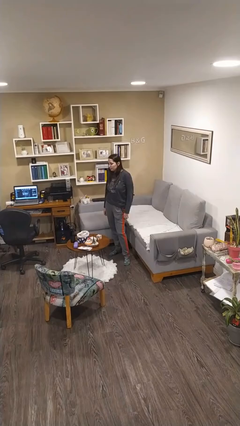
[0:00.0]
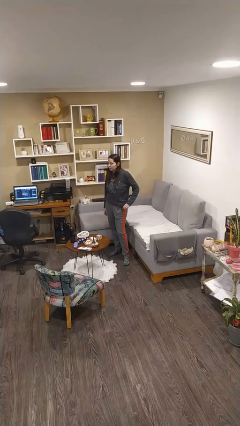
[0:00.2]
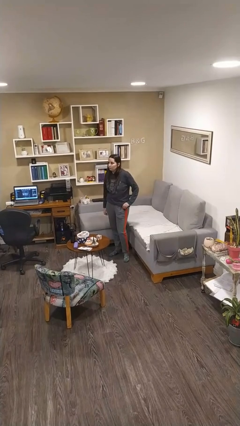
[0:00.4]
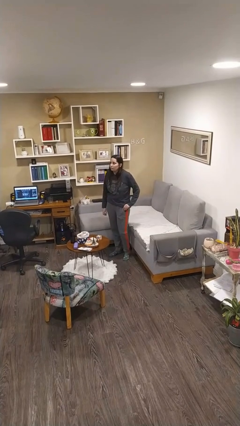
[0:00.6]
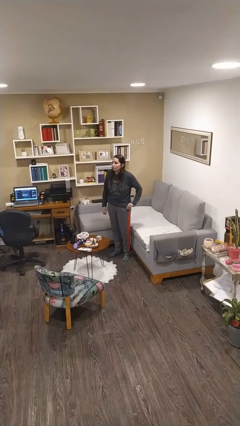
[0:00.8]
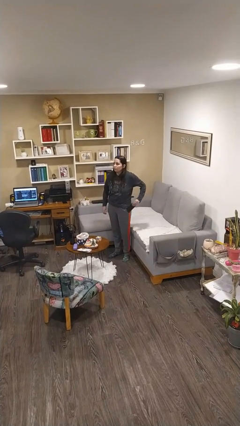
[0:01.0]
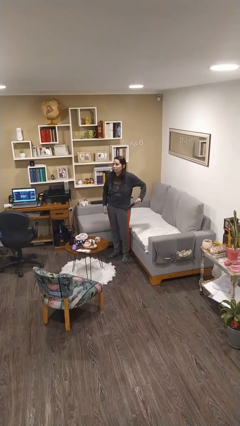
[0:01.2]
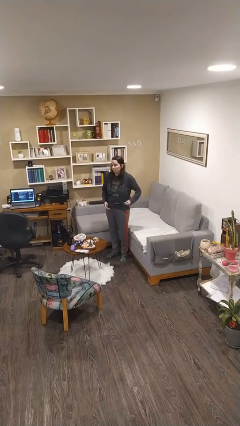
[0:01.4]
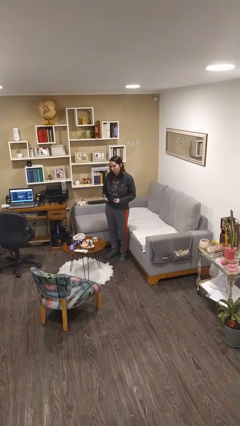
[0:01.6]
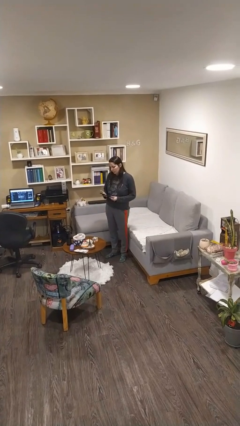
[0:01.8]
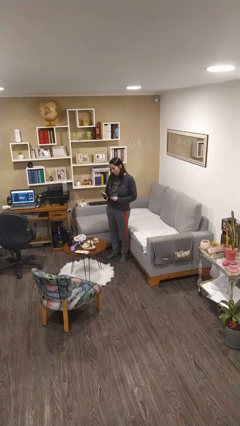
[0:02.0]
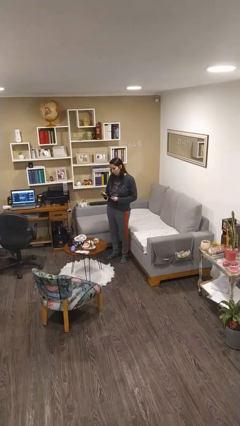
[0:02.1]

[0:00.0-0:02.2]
person takes phone from pocket

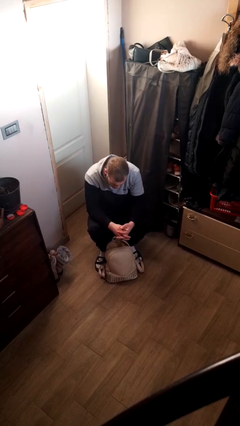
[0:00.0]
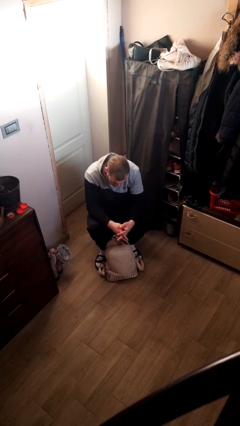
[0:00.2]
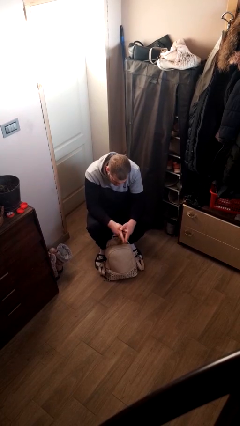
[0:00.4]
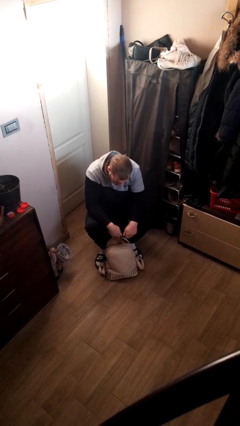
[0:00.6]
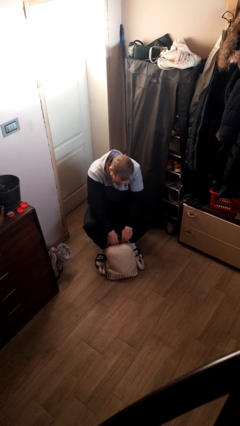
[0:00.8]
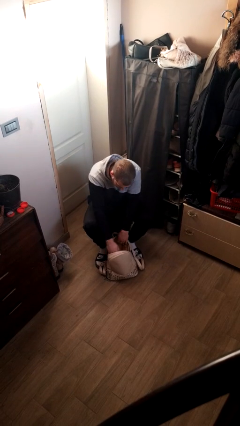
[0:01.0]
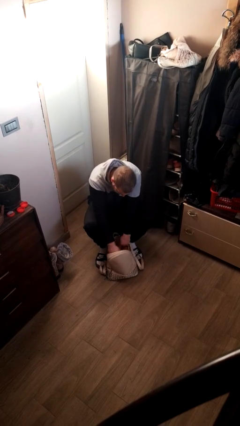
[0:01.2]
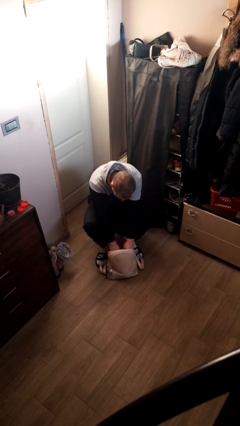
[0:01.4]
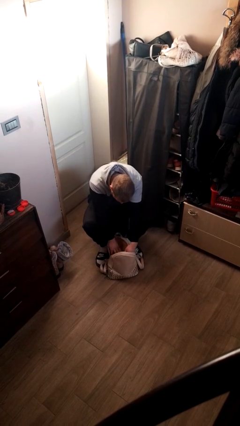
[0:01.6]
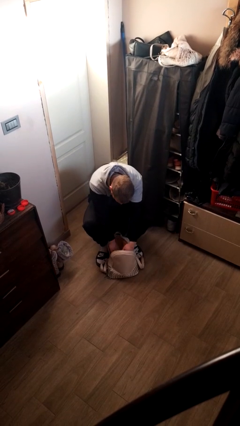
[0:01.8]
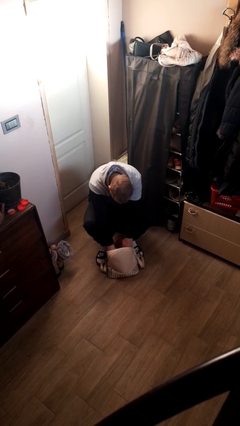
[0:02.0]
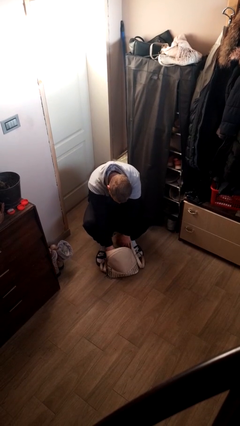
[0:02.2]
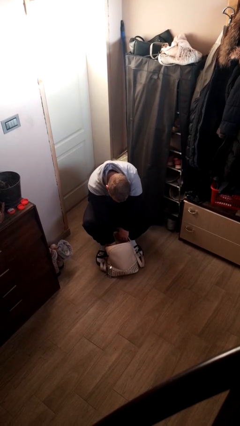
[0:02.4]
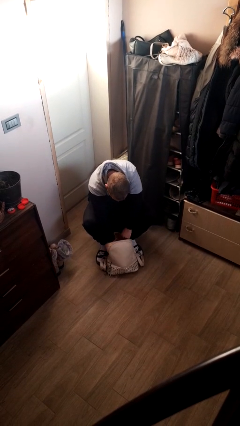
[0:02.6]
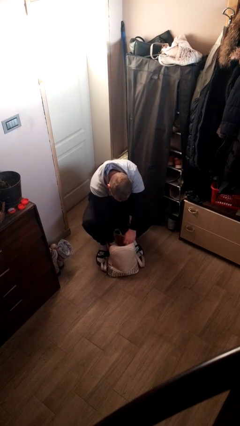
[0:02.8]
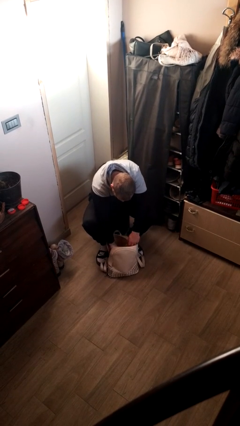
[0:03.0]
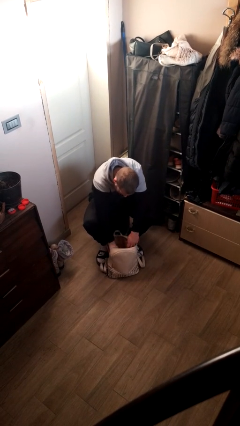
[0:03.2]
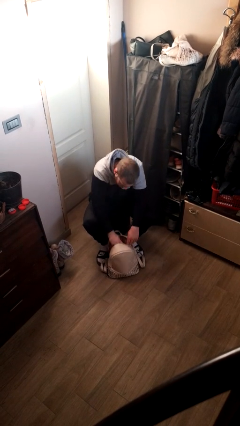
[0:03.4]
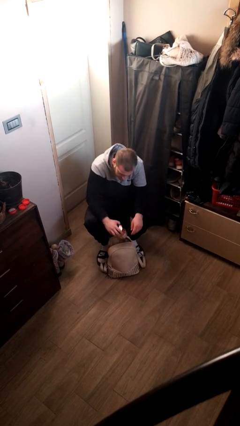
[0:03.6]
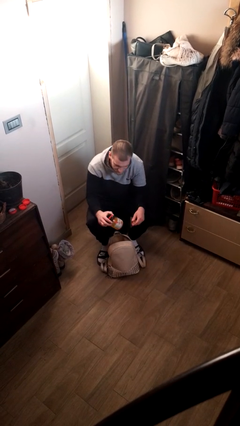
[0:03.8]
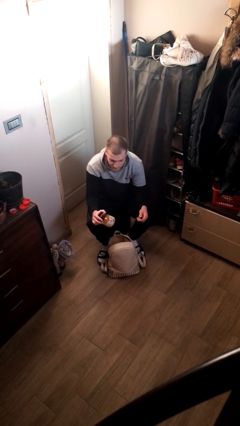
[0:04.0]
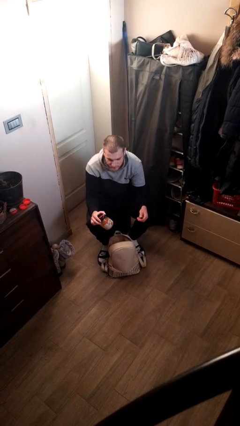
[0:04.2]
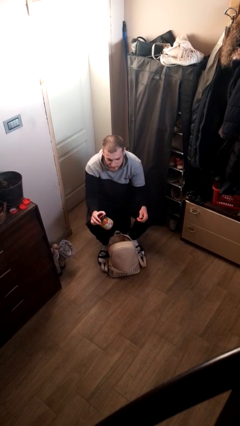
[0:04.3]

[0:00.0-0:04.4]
person searches in backpack

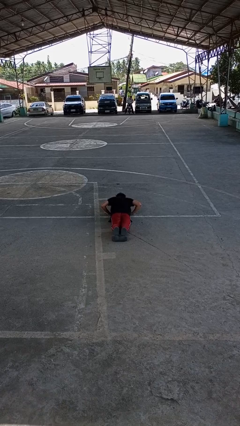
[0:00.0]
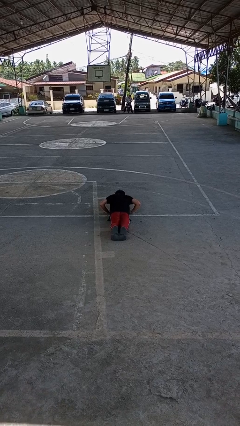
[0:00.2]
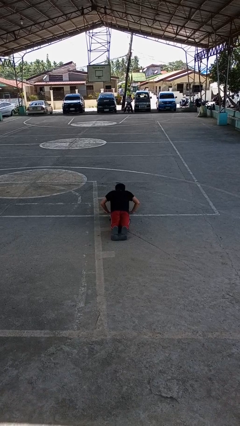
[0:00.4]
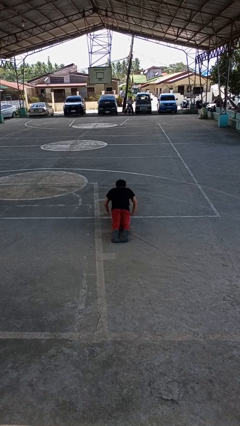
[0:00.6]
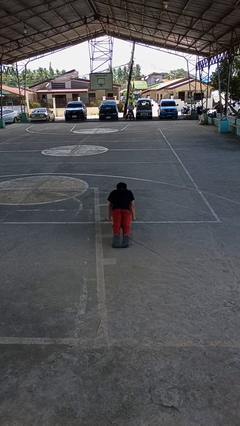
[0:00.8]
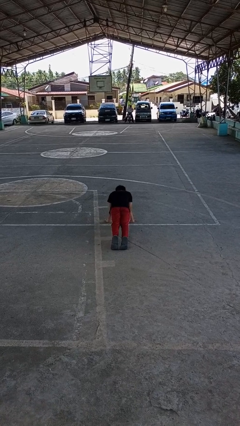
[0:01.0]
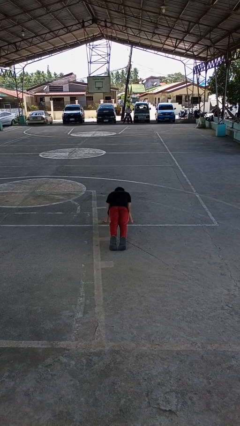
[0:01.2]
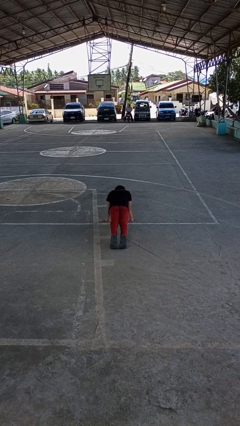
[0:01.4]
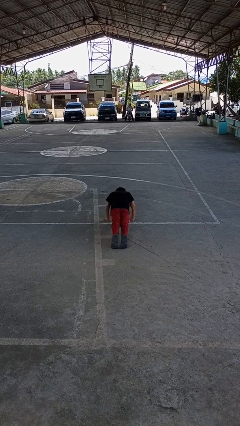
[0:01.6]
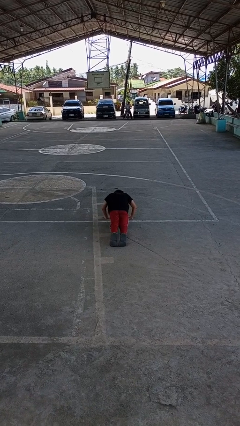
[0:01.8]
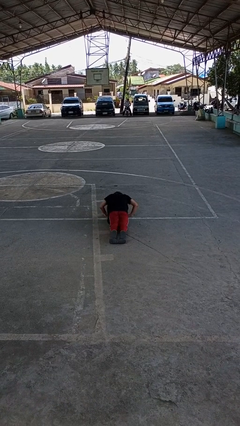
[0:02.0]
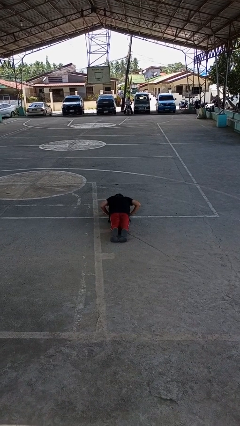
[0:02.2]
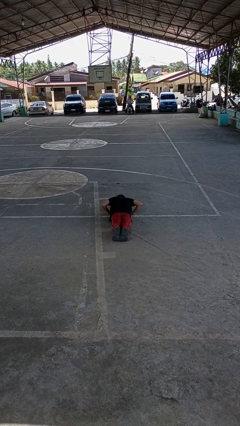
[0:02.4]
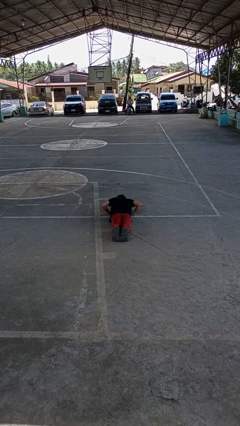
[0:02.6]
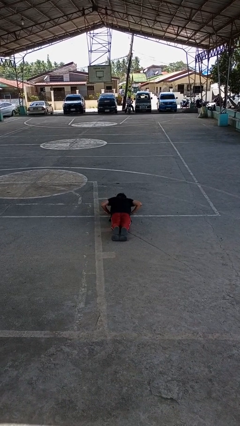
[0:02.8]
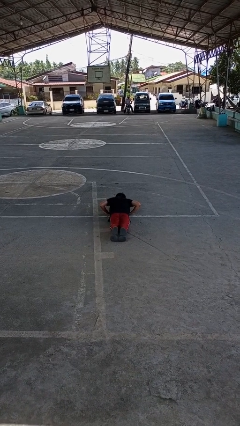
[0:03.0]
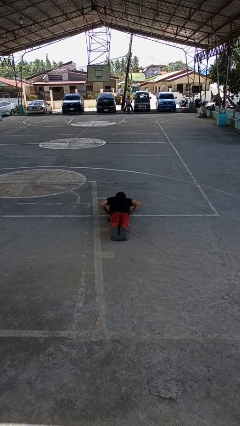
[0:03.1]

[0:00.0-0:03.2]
person exercises with pushup

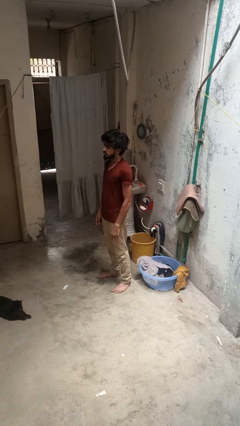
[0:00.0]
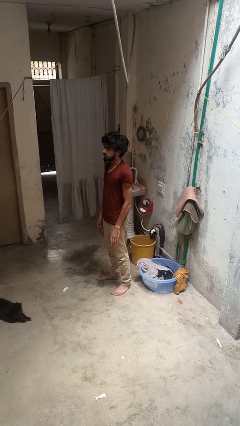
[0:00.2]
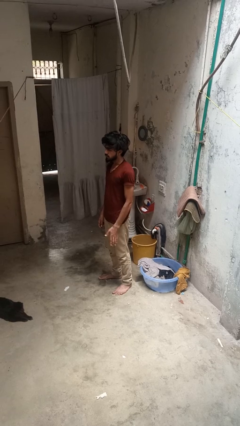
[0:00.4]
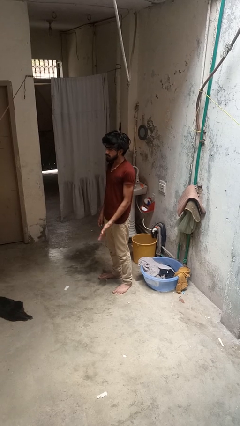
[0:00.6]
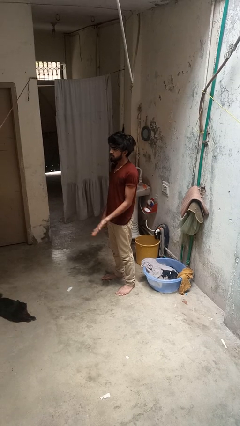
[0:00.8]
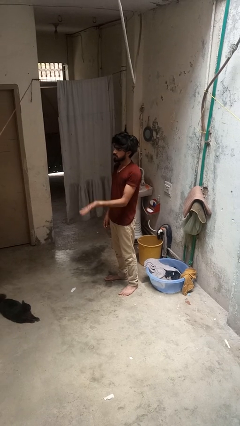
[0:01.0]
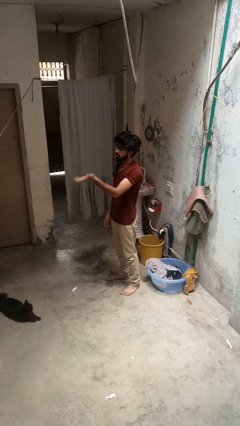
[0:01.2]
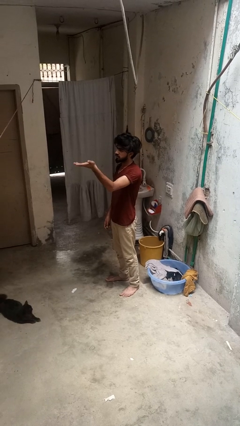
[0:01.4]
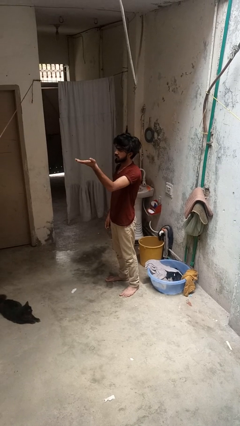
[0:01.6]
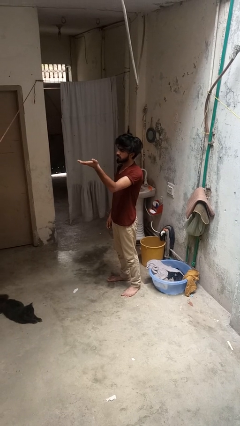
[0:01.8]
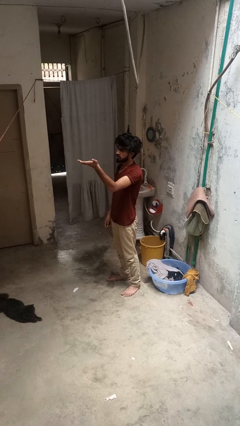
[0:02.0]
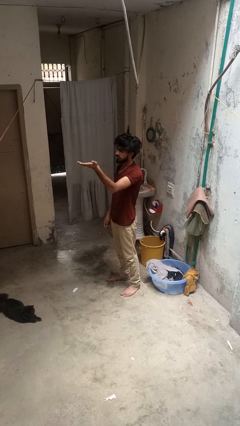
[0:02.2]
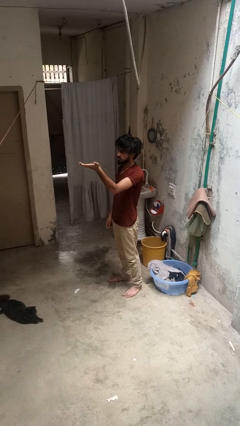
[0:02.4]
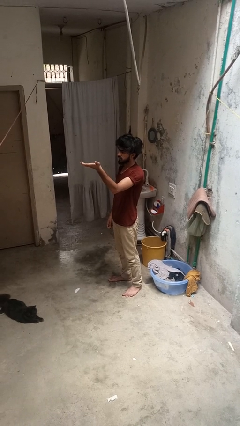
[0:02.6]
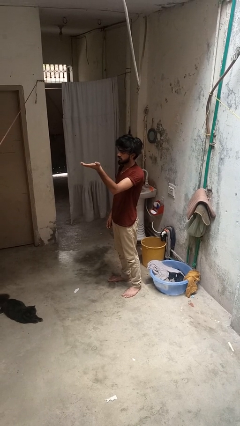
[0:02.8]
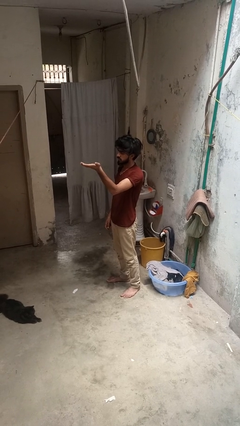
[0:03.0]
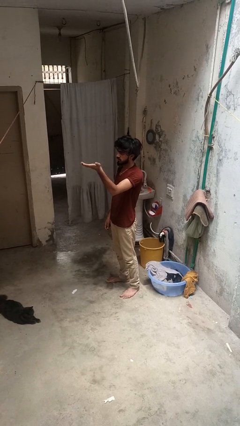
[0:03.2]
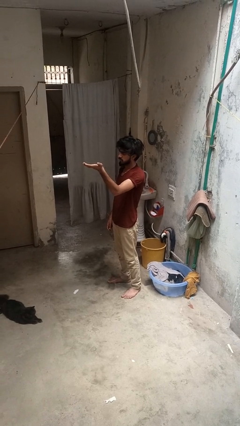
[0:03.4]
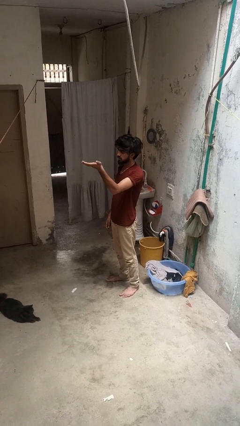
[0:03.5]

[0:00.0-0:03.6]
person gestures swipe up

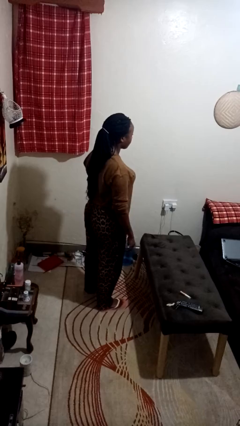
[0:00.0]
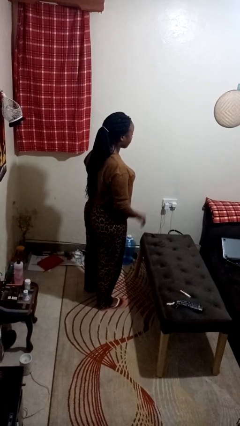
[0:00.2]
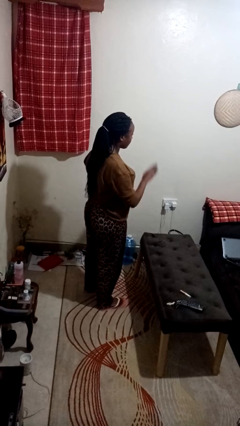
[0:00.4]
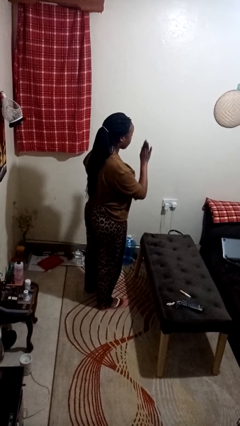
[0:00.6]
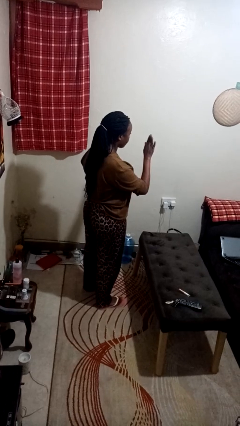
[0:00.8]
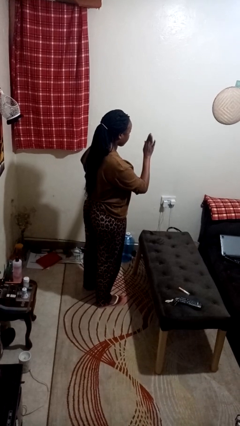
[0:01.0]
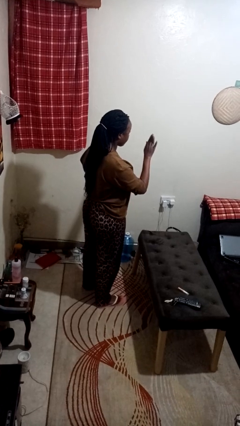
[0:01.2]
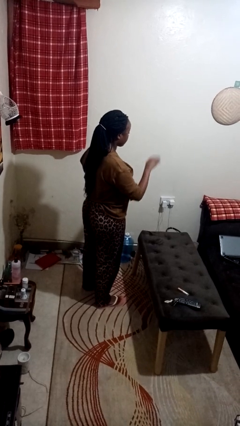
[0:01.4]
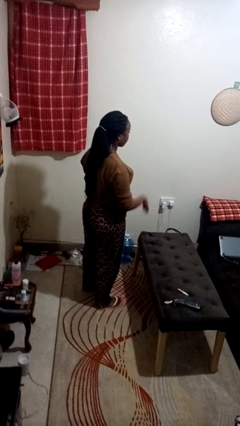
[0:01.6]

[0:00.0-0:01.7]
person gestures stop

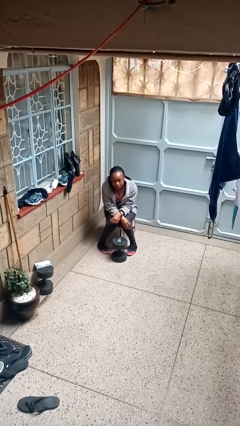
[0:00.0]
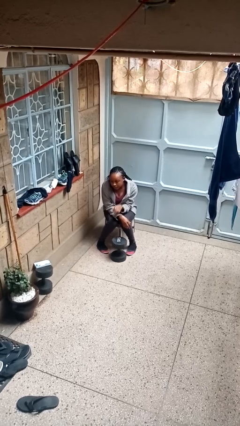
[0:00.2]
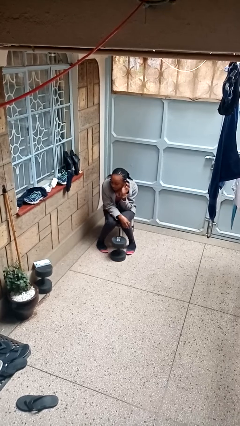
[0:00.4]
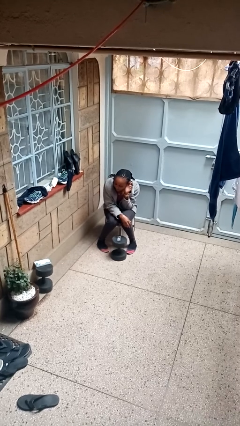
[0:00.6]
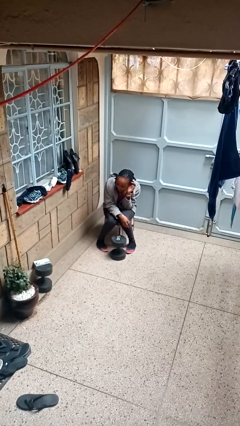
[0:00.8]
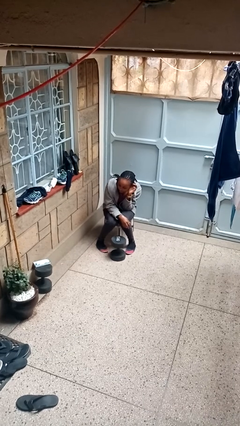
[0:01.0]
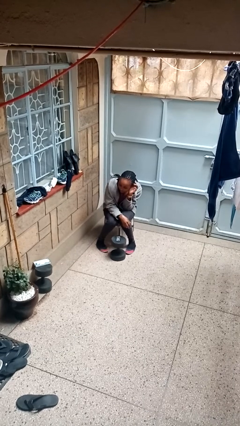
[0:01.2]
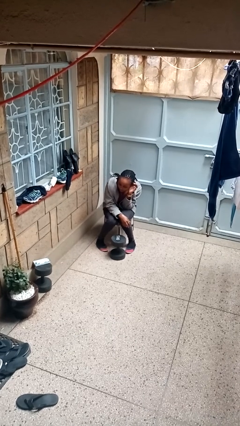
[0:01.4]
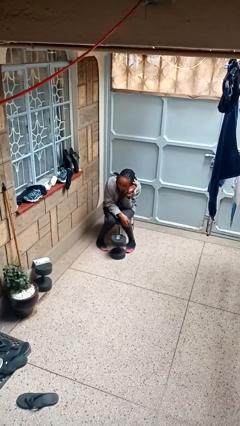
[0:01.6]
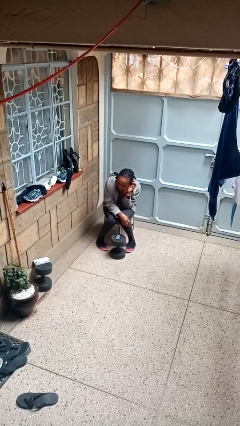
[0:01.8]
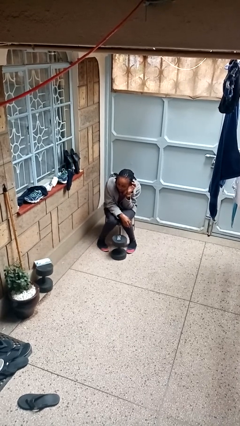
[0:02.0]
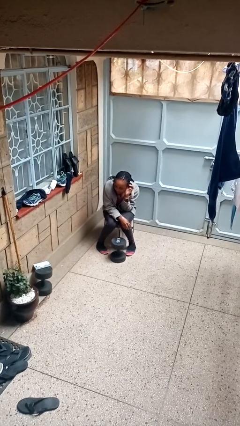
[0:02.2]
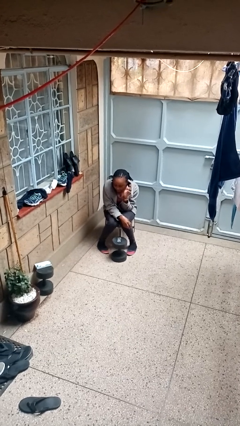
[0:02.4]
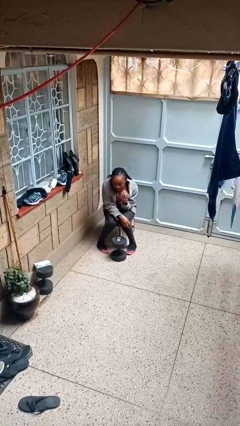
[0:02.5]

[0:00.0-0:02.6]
person gestures listen closely
